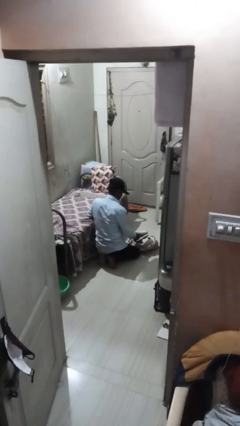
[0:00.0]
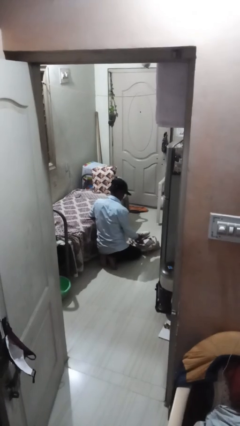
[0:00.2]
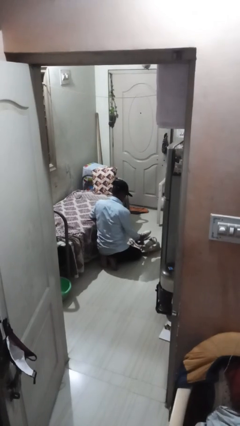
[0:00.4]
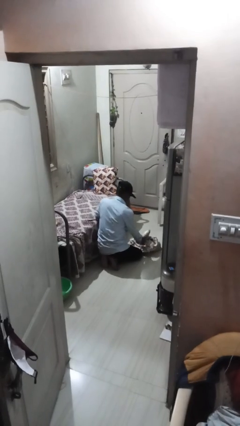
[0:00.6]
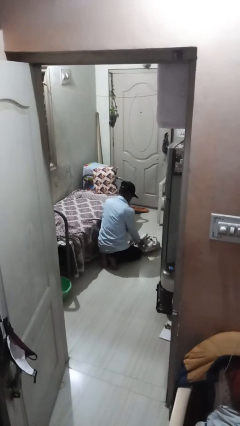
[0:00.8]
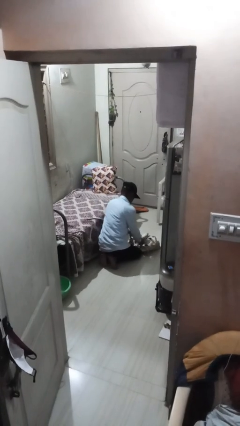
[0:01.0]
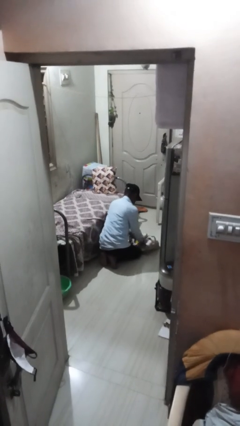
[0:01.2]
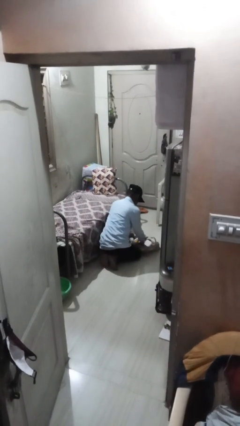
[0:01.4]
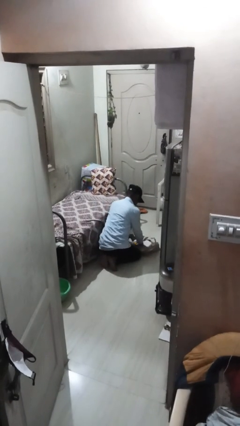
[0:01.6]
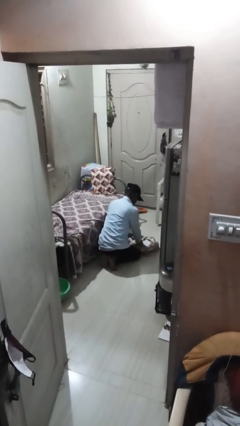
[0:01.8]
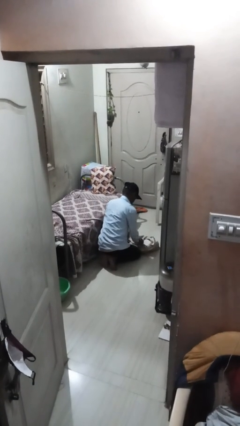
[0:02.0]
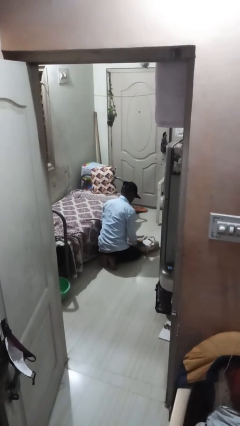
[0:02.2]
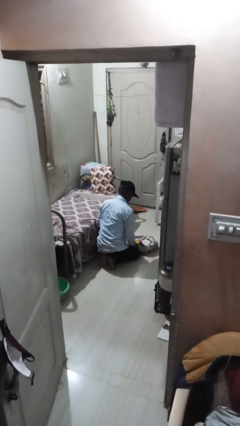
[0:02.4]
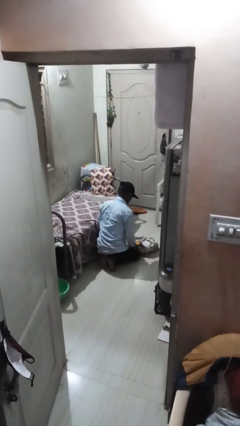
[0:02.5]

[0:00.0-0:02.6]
person puts object into bag

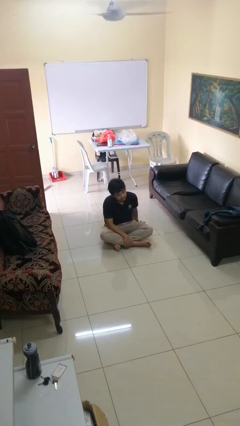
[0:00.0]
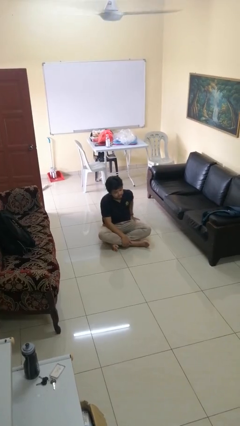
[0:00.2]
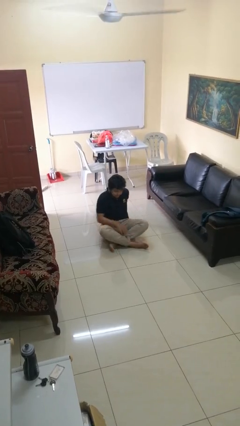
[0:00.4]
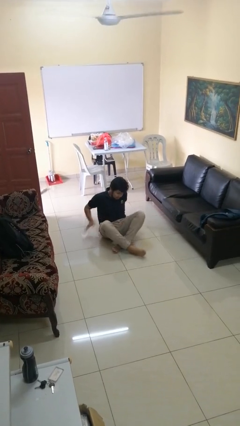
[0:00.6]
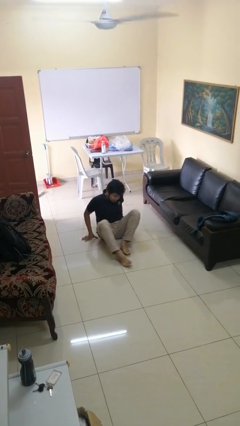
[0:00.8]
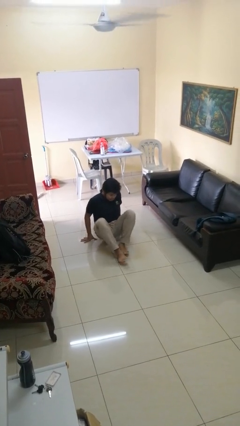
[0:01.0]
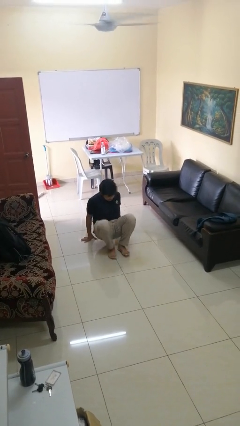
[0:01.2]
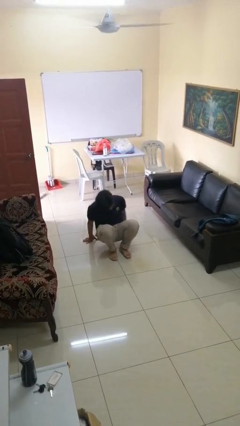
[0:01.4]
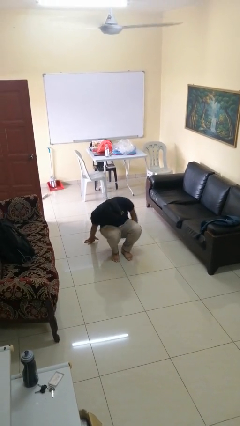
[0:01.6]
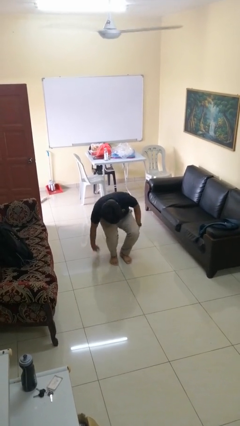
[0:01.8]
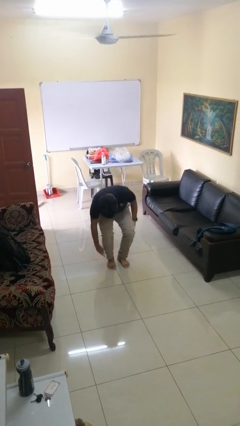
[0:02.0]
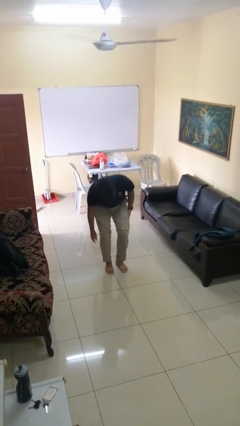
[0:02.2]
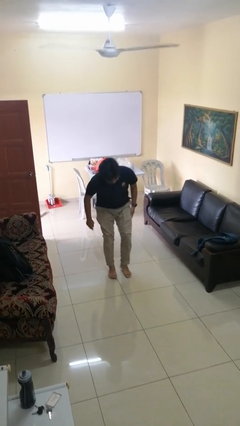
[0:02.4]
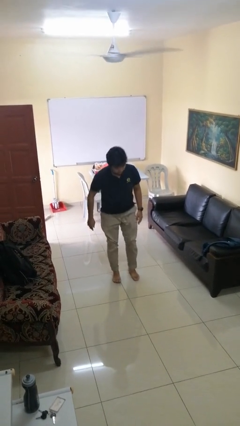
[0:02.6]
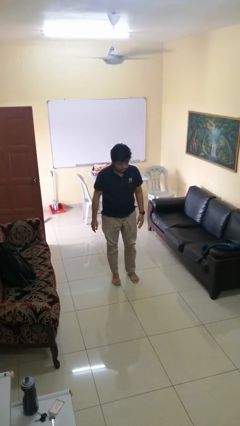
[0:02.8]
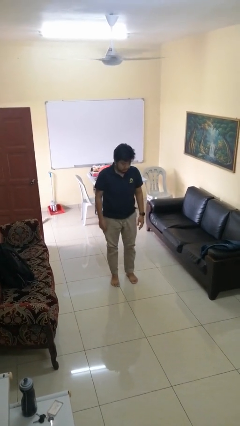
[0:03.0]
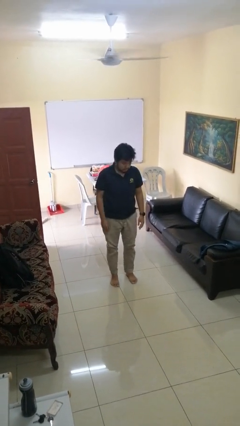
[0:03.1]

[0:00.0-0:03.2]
person stands up from floor

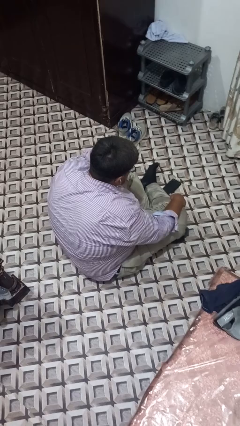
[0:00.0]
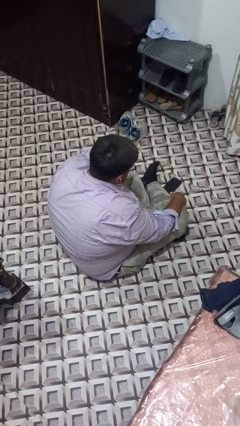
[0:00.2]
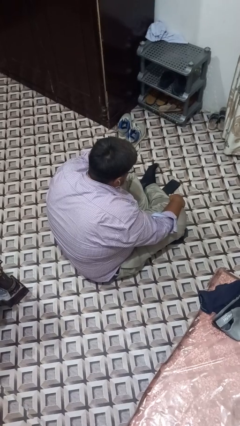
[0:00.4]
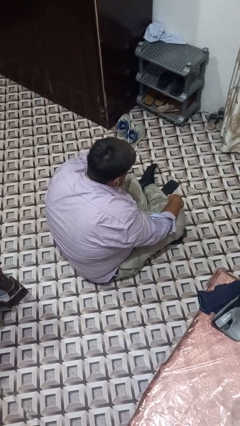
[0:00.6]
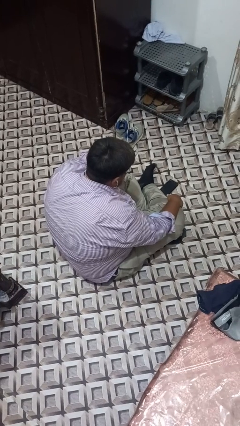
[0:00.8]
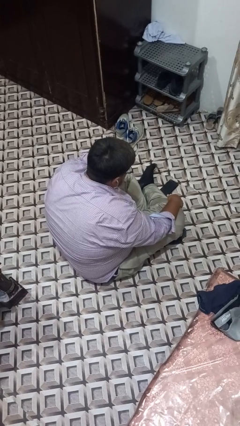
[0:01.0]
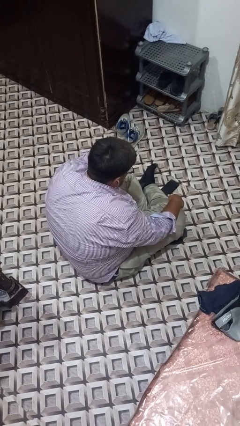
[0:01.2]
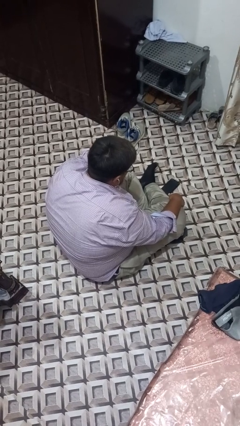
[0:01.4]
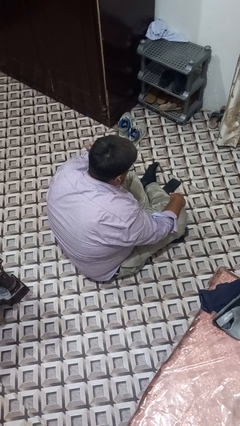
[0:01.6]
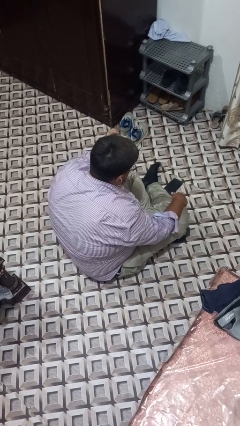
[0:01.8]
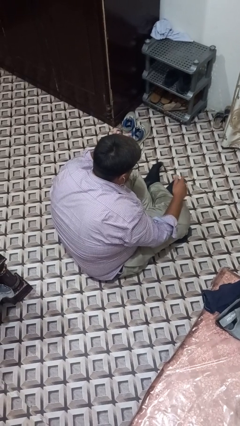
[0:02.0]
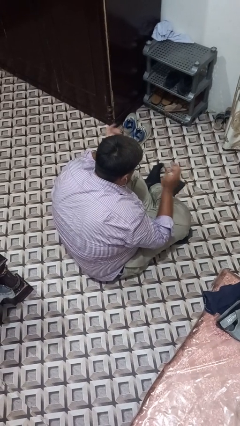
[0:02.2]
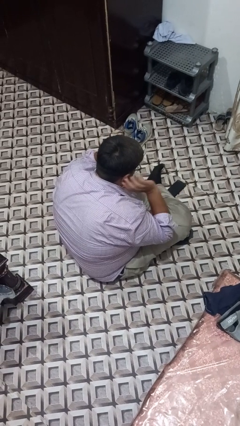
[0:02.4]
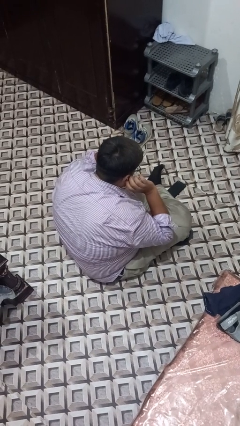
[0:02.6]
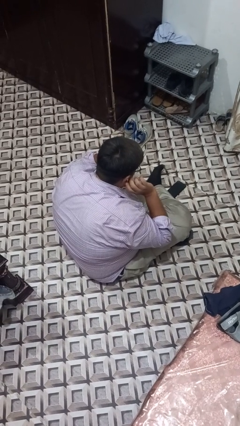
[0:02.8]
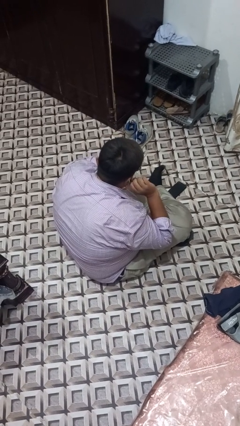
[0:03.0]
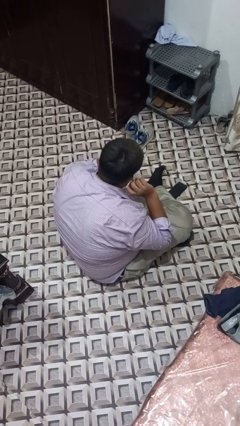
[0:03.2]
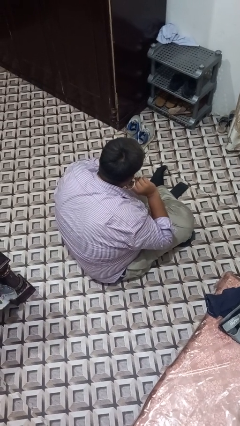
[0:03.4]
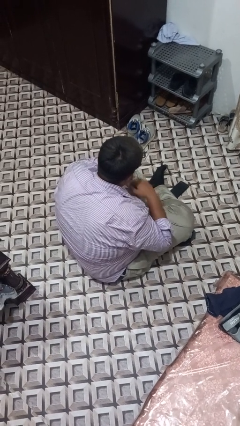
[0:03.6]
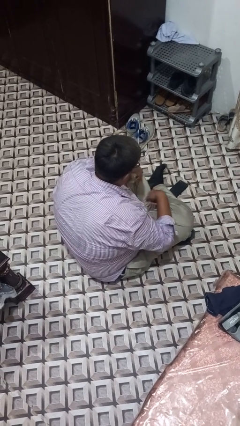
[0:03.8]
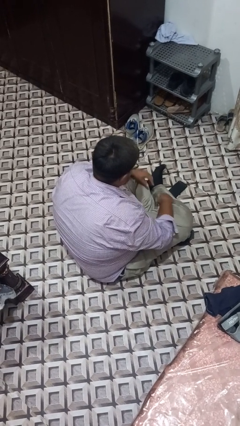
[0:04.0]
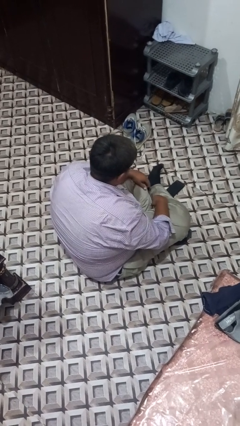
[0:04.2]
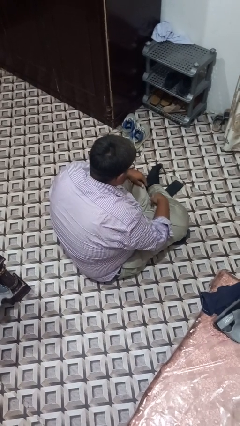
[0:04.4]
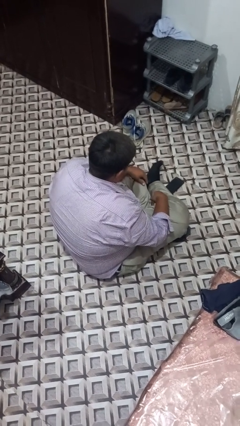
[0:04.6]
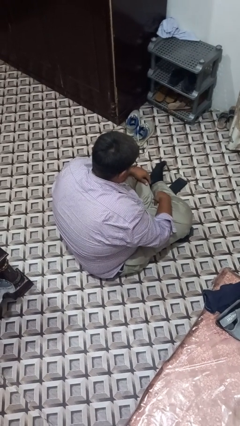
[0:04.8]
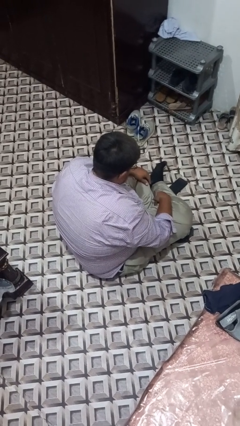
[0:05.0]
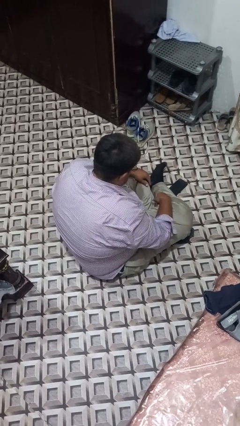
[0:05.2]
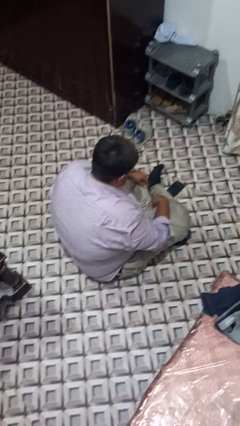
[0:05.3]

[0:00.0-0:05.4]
person takes off headphones

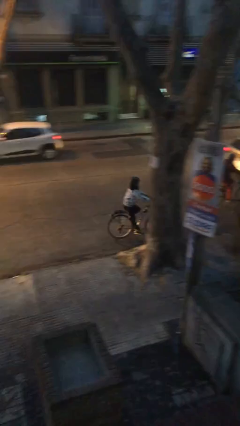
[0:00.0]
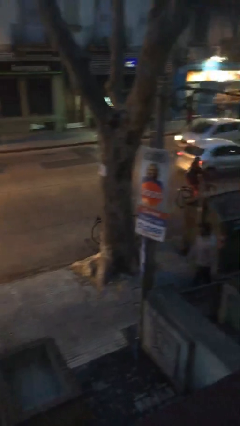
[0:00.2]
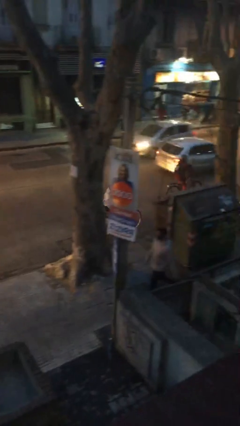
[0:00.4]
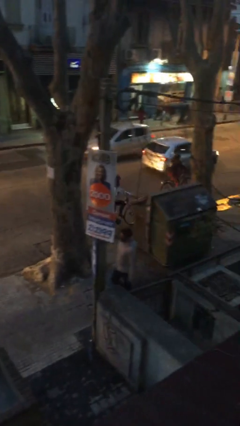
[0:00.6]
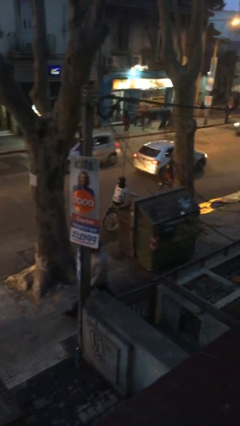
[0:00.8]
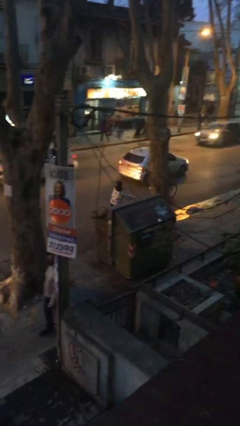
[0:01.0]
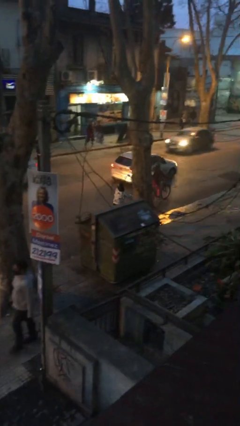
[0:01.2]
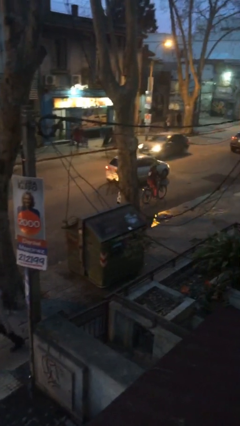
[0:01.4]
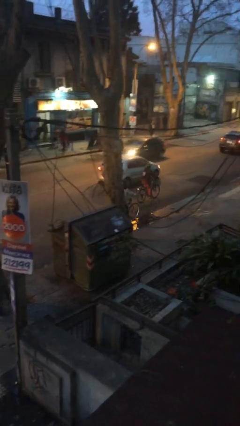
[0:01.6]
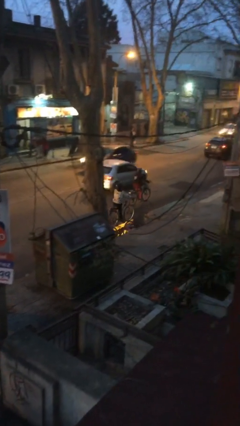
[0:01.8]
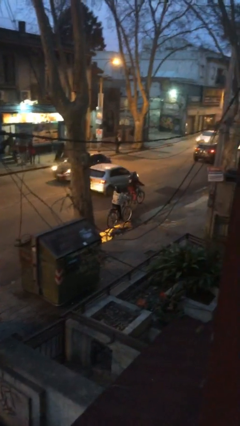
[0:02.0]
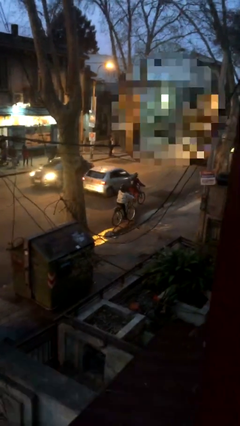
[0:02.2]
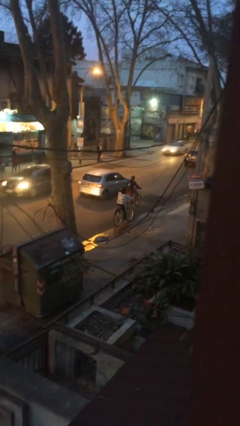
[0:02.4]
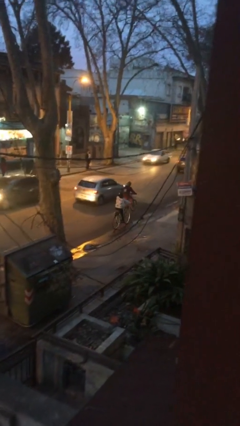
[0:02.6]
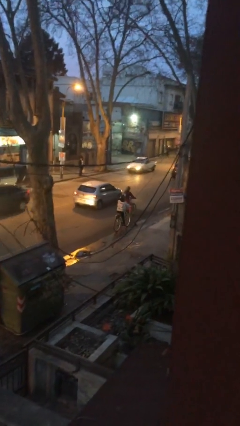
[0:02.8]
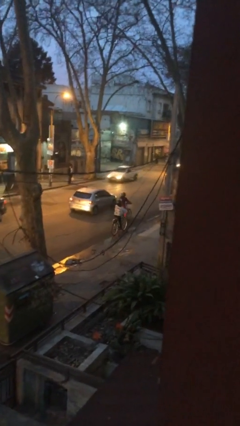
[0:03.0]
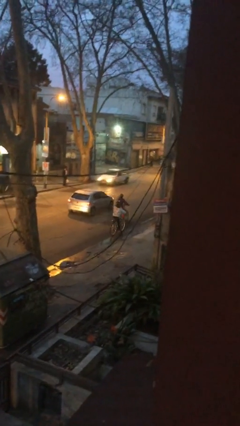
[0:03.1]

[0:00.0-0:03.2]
person rides bicycle

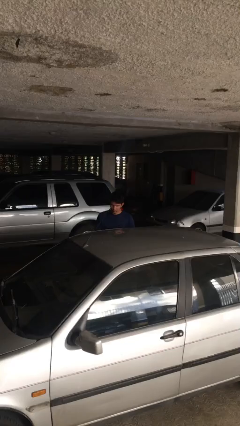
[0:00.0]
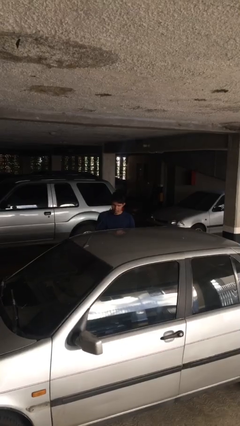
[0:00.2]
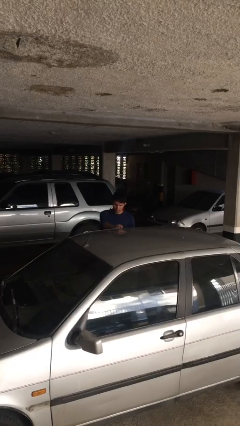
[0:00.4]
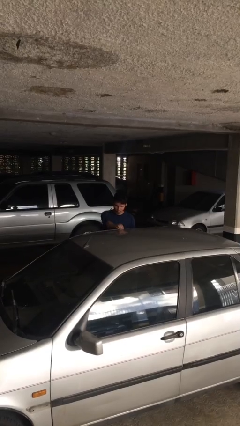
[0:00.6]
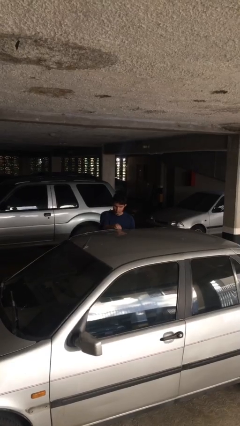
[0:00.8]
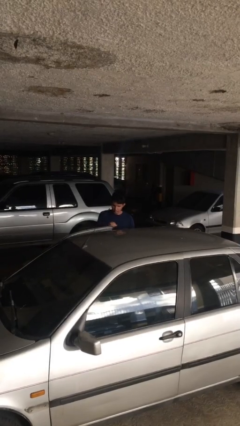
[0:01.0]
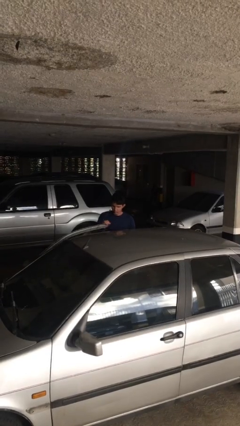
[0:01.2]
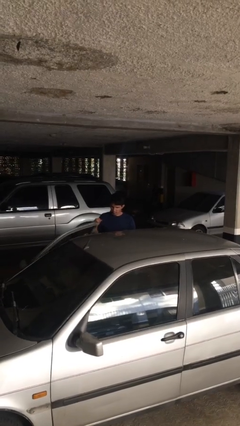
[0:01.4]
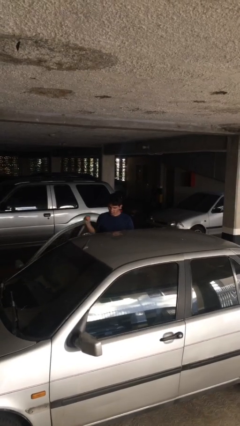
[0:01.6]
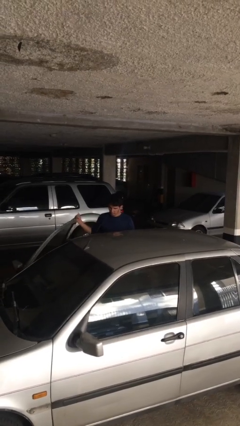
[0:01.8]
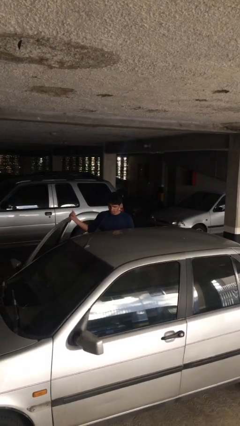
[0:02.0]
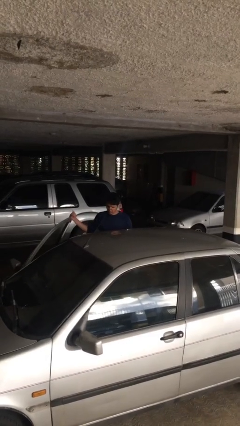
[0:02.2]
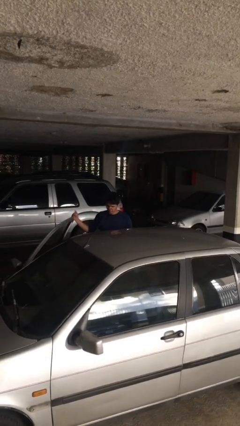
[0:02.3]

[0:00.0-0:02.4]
person opens car door

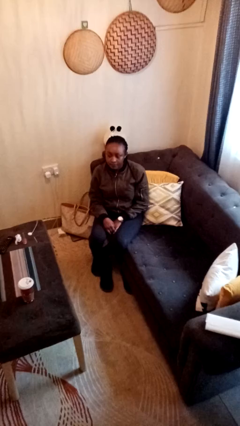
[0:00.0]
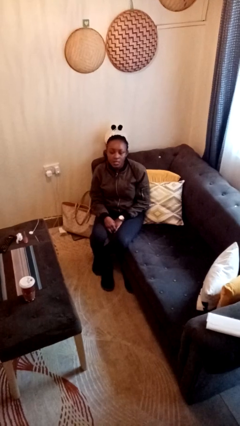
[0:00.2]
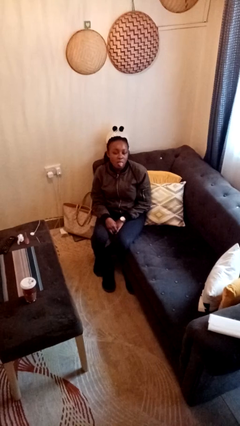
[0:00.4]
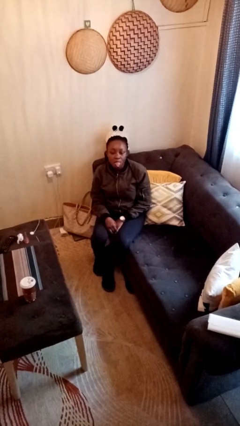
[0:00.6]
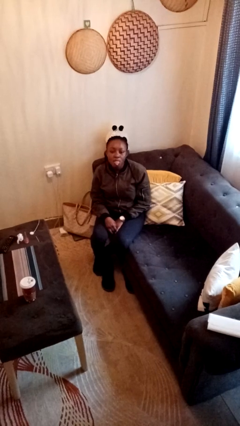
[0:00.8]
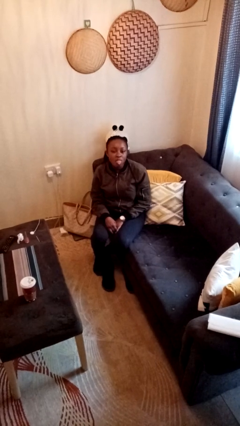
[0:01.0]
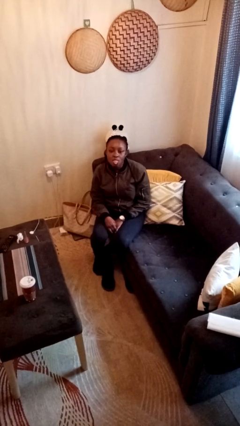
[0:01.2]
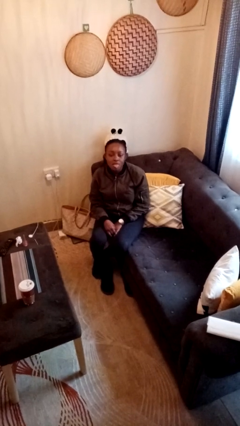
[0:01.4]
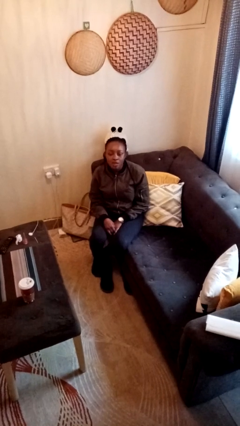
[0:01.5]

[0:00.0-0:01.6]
person sticks out tongue
